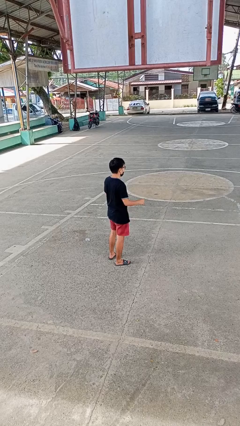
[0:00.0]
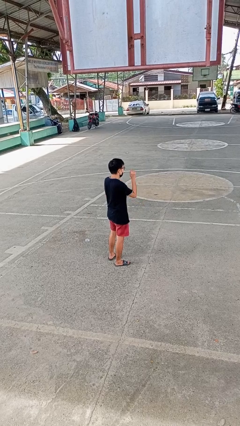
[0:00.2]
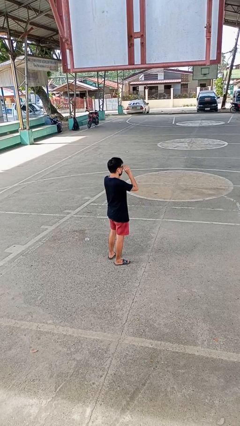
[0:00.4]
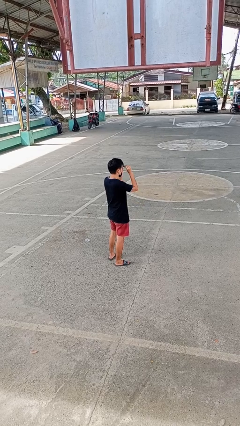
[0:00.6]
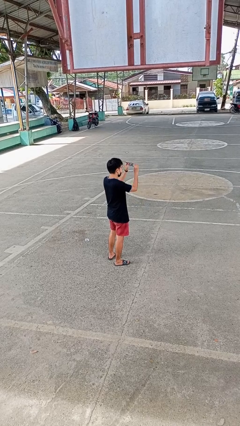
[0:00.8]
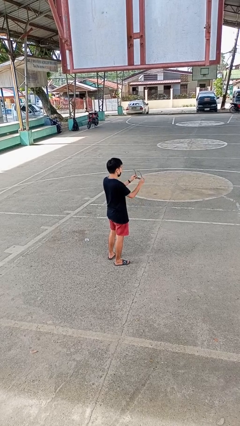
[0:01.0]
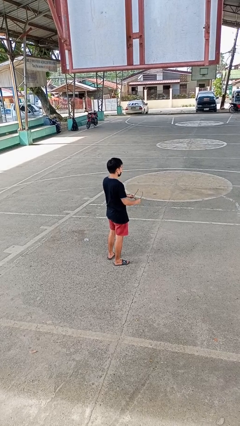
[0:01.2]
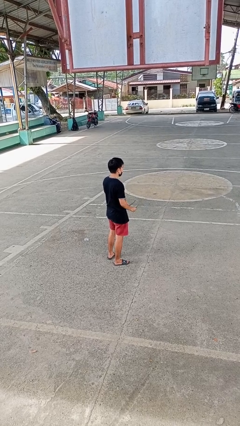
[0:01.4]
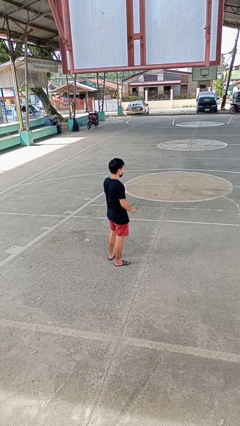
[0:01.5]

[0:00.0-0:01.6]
person takes off glasses

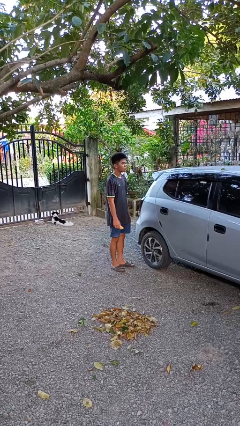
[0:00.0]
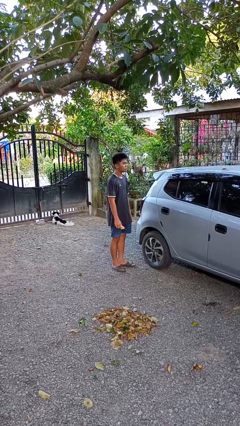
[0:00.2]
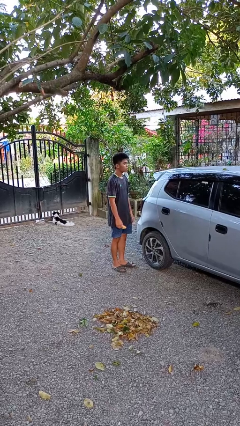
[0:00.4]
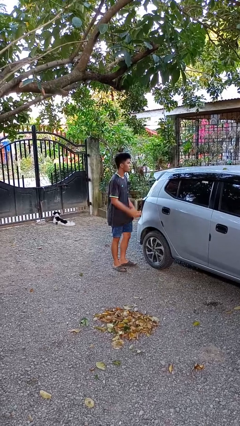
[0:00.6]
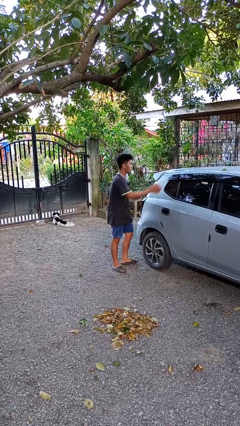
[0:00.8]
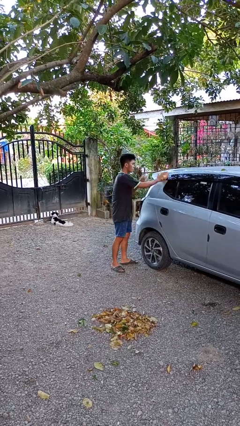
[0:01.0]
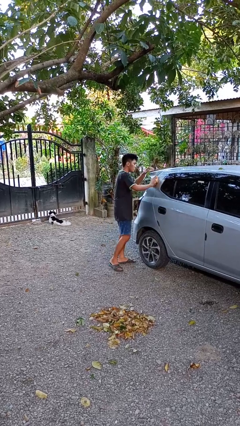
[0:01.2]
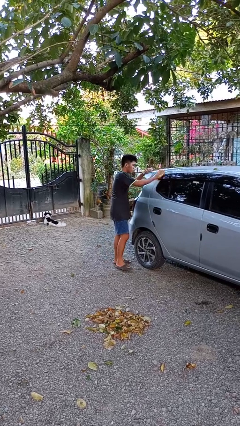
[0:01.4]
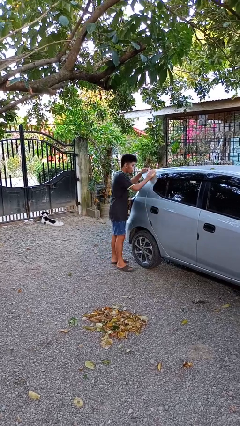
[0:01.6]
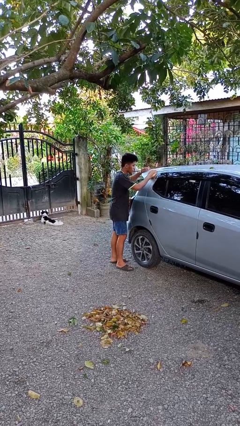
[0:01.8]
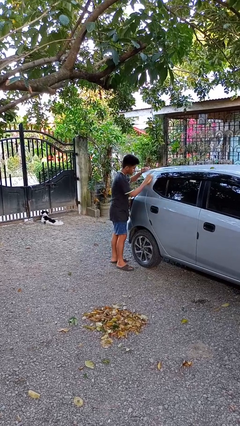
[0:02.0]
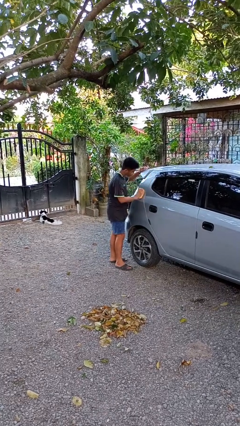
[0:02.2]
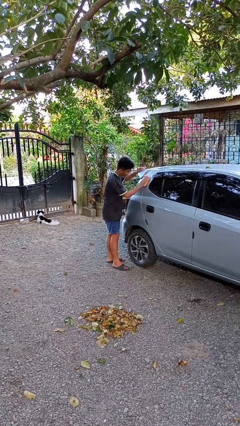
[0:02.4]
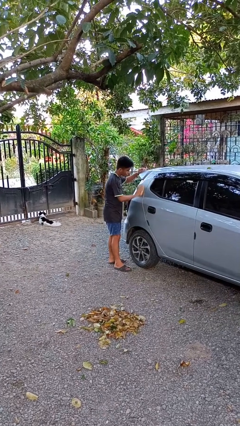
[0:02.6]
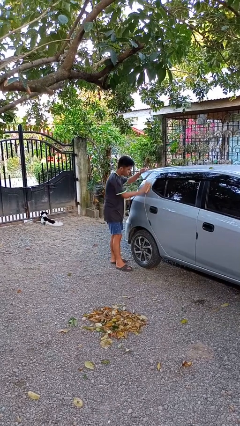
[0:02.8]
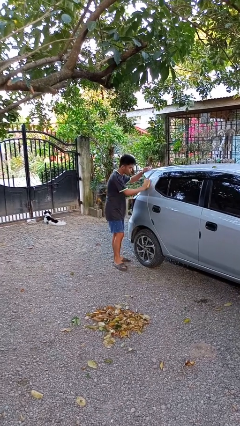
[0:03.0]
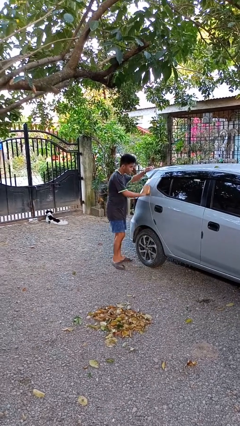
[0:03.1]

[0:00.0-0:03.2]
person polishes car with rag

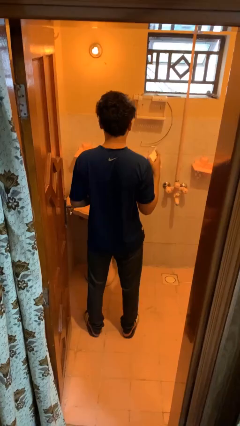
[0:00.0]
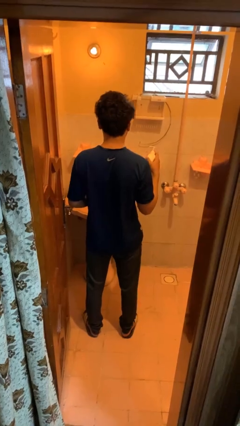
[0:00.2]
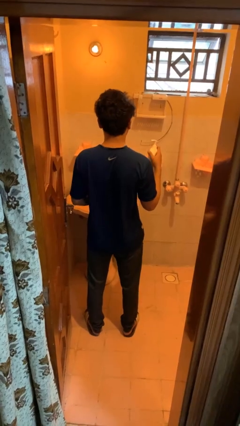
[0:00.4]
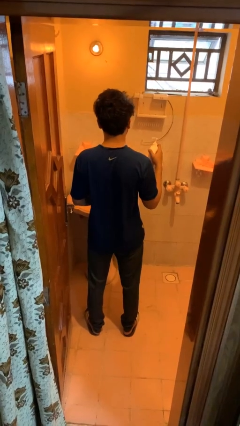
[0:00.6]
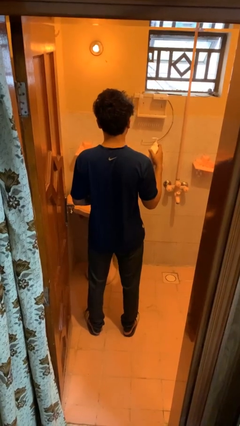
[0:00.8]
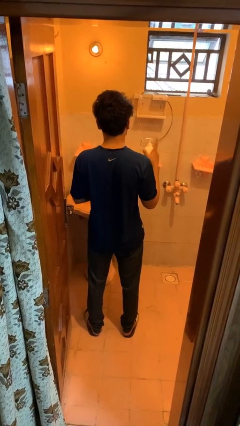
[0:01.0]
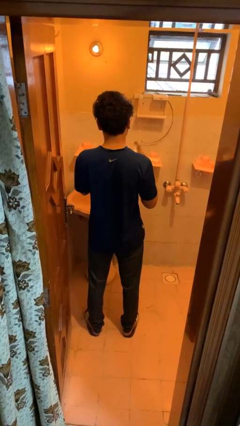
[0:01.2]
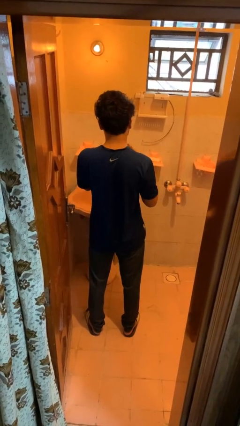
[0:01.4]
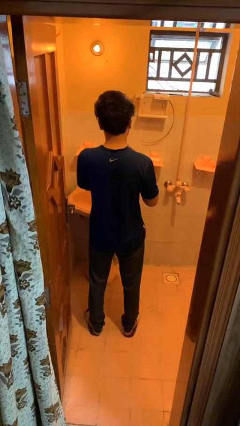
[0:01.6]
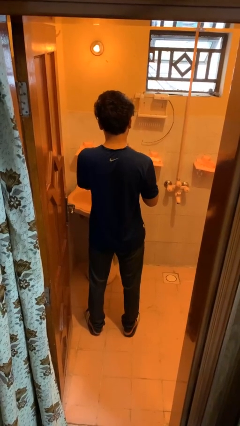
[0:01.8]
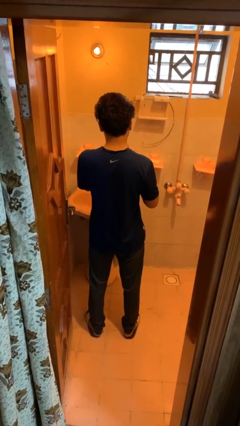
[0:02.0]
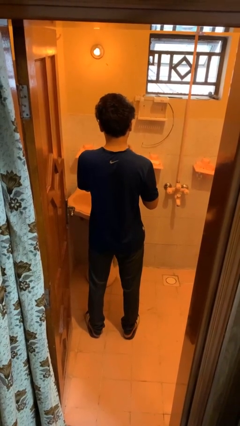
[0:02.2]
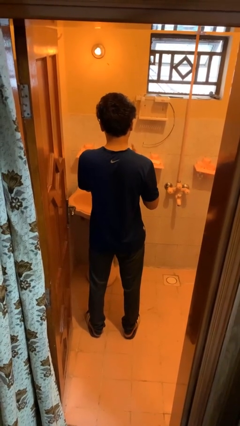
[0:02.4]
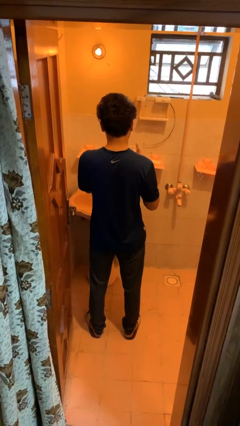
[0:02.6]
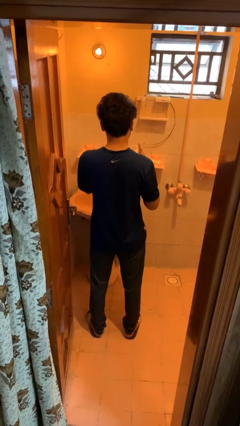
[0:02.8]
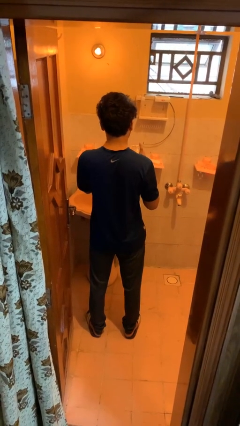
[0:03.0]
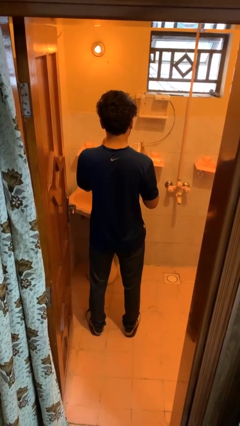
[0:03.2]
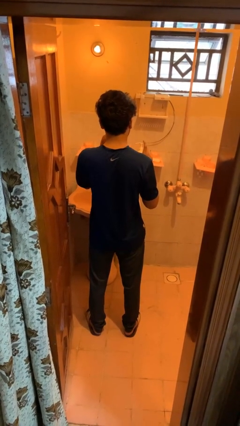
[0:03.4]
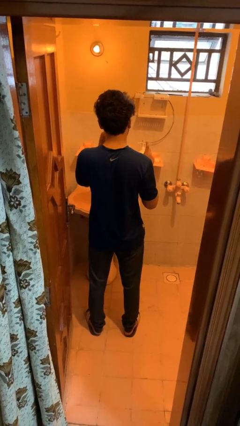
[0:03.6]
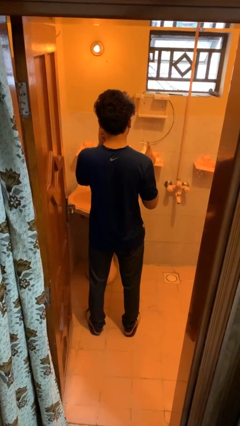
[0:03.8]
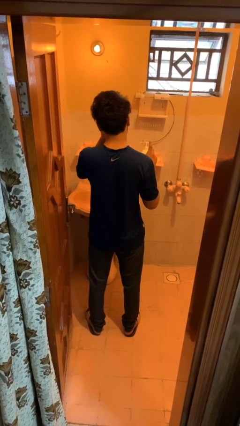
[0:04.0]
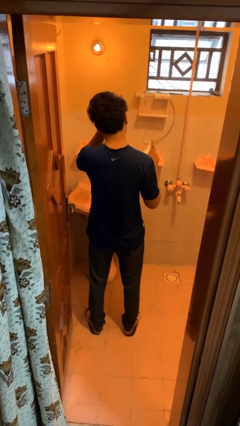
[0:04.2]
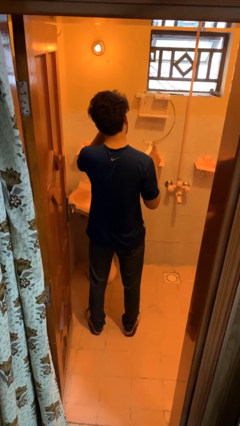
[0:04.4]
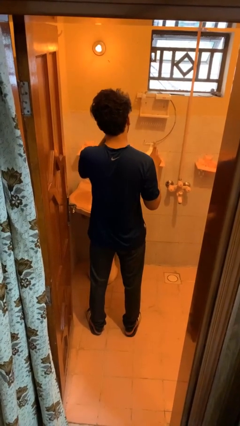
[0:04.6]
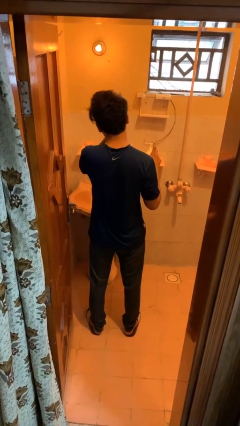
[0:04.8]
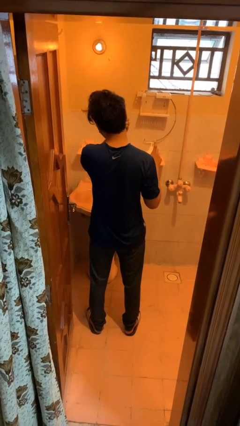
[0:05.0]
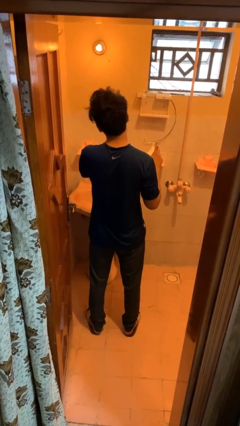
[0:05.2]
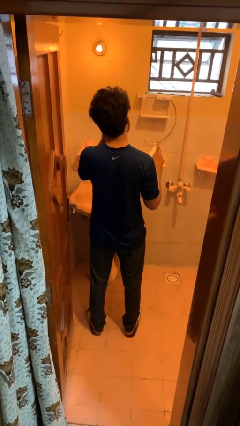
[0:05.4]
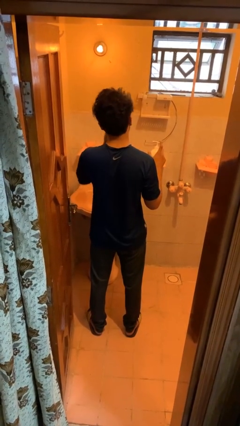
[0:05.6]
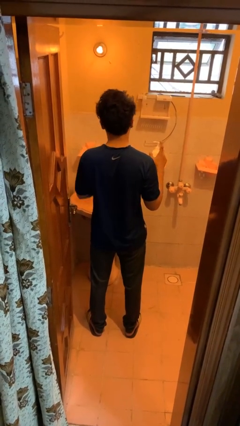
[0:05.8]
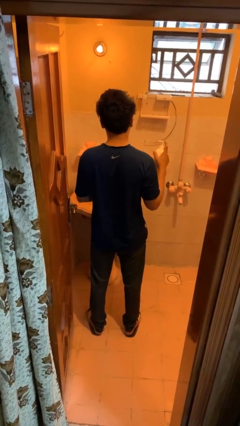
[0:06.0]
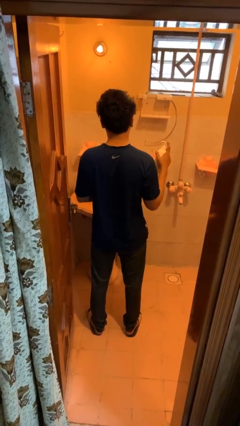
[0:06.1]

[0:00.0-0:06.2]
person applies facial moisturizer

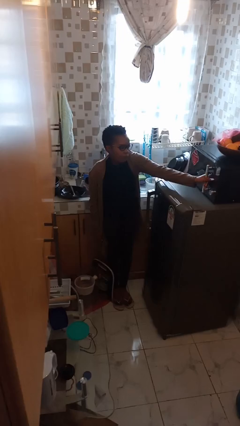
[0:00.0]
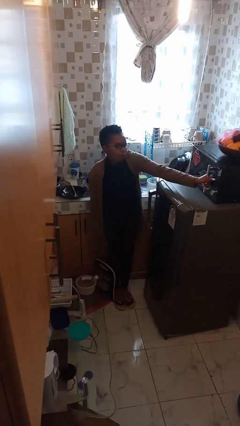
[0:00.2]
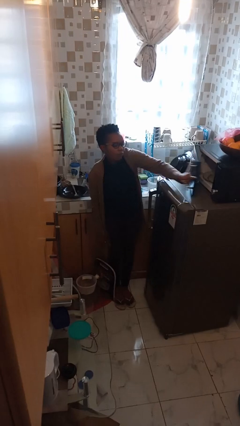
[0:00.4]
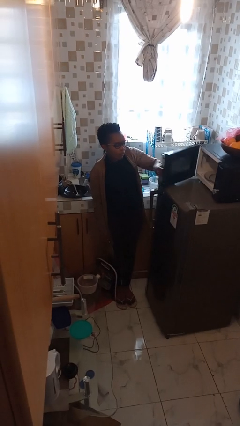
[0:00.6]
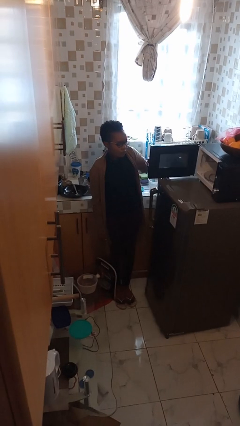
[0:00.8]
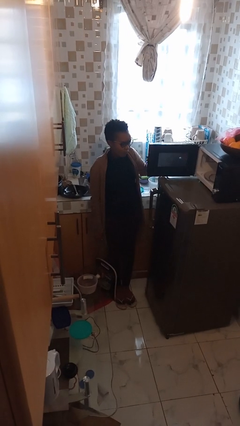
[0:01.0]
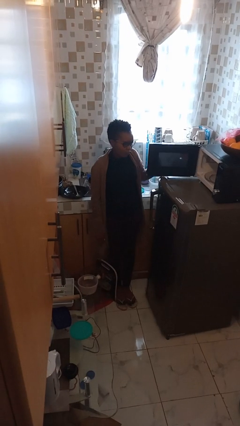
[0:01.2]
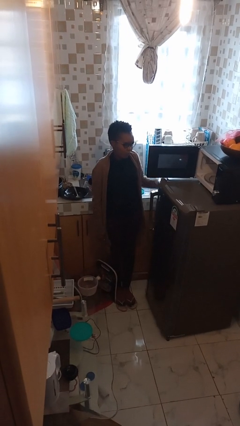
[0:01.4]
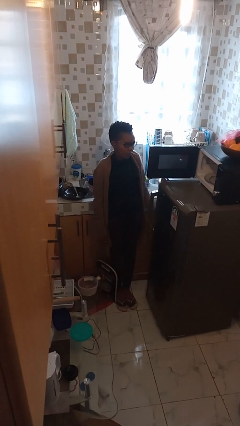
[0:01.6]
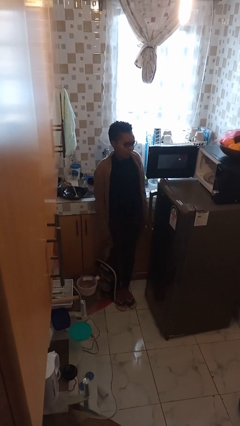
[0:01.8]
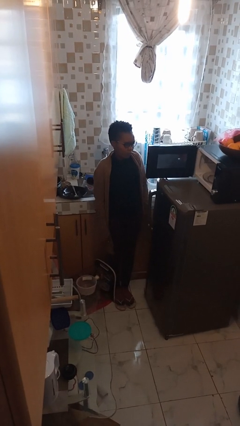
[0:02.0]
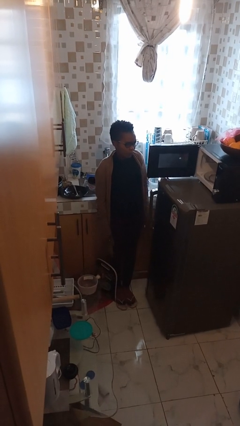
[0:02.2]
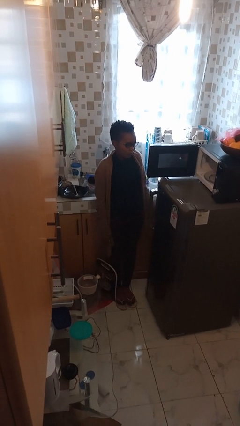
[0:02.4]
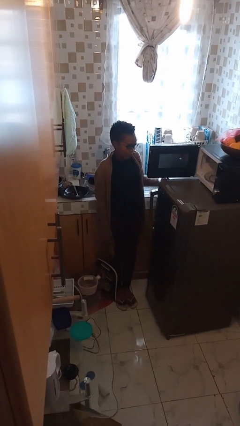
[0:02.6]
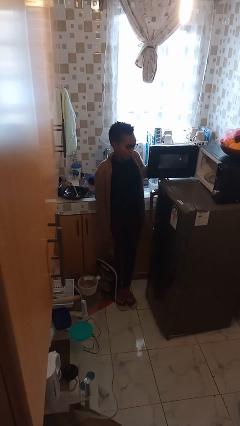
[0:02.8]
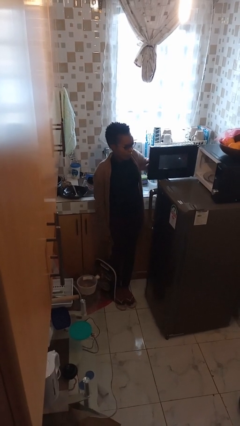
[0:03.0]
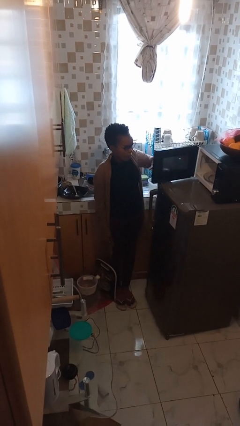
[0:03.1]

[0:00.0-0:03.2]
person opens microwave

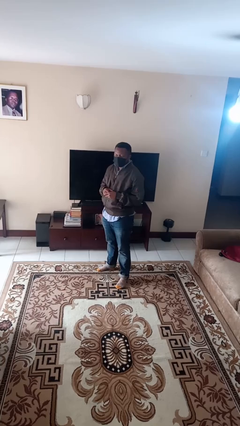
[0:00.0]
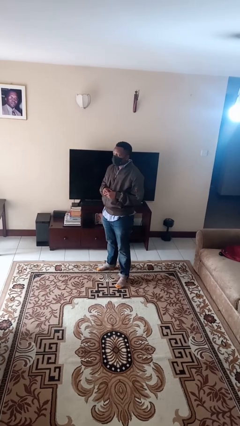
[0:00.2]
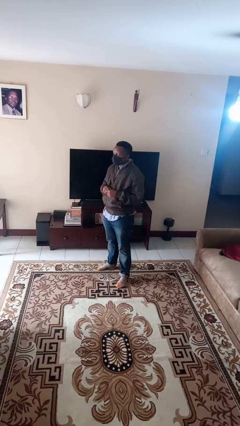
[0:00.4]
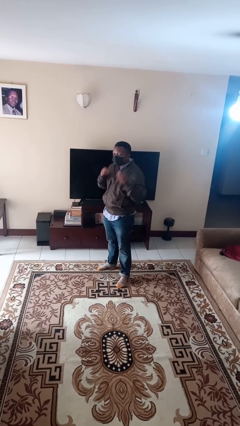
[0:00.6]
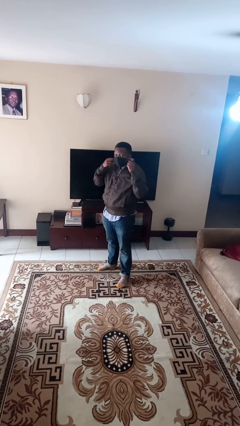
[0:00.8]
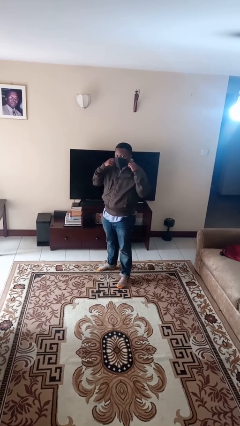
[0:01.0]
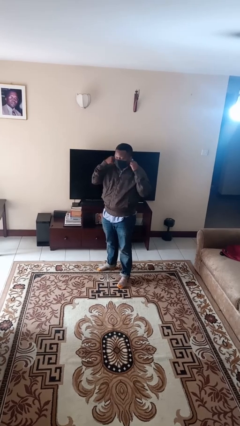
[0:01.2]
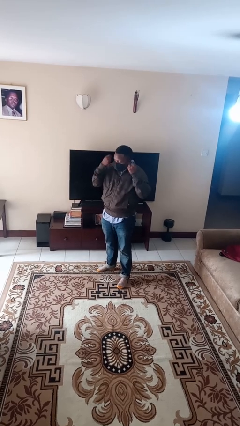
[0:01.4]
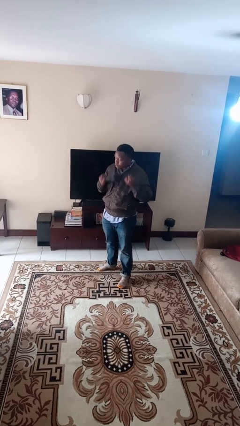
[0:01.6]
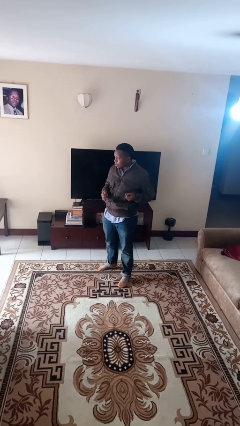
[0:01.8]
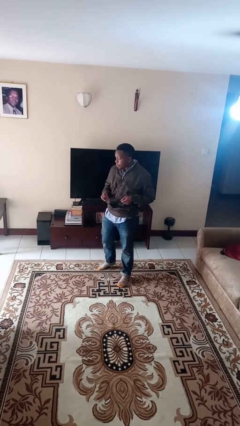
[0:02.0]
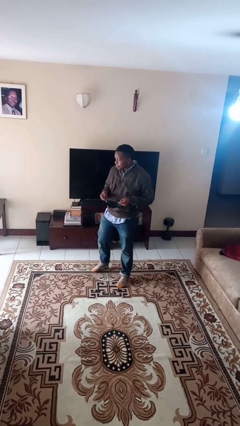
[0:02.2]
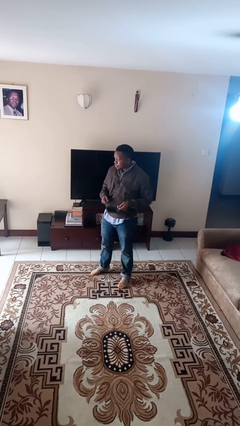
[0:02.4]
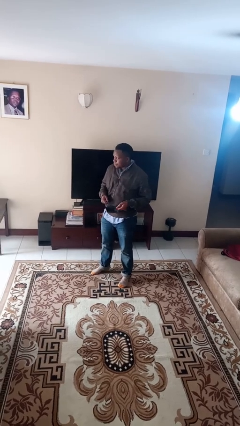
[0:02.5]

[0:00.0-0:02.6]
person takes off facemask

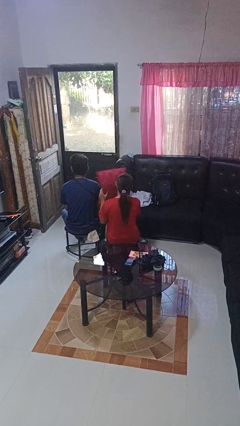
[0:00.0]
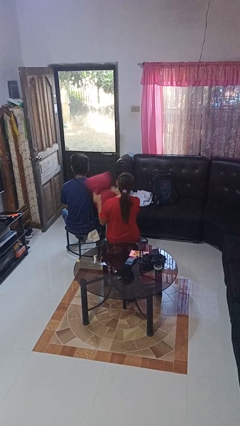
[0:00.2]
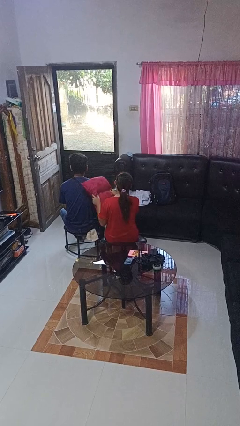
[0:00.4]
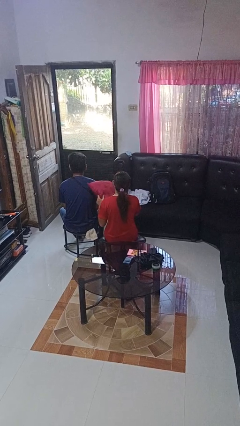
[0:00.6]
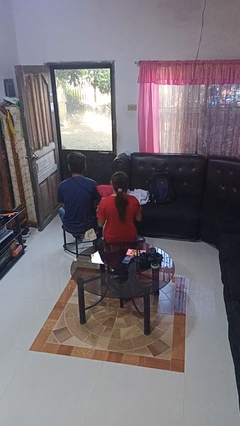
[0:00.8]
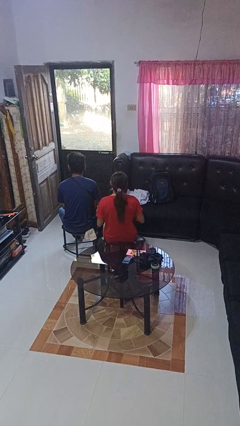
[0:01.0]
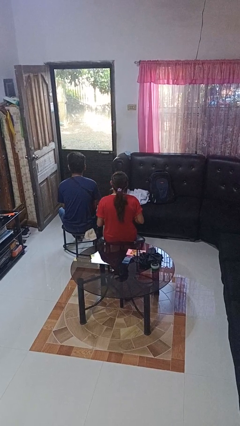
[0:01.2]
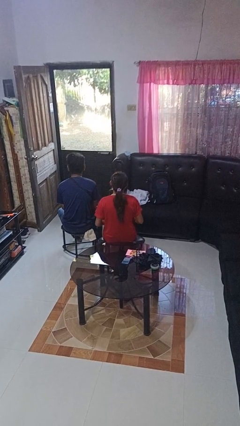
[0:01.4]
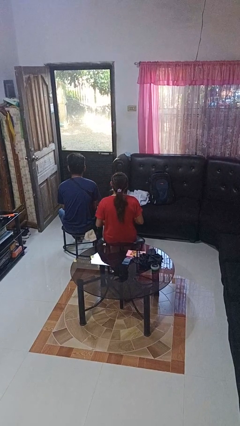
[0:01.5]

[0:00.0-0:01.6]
person hits person with pillow
